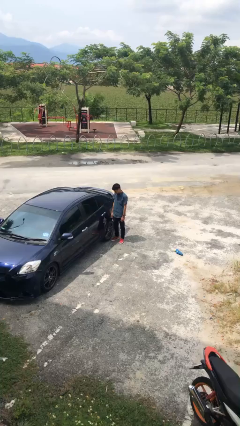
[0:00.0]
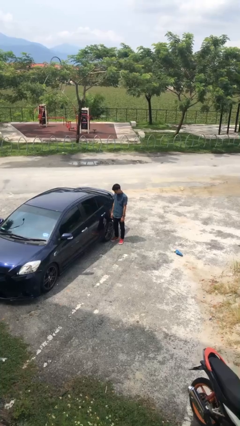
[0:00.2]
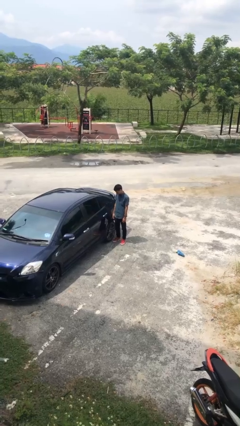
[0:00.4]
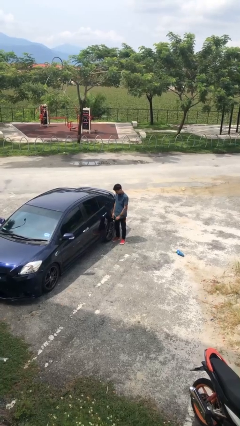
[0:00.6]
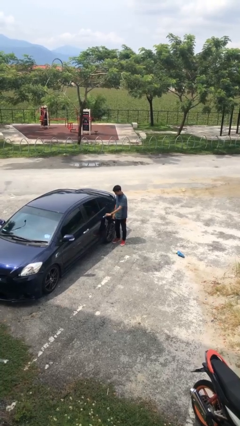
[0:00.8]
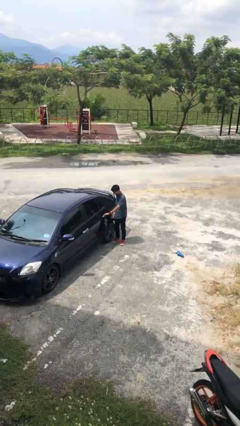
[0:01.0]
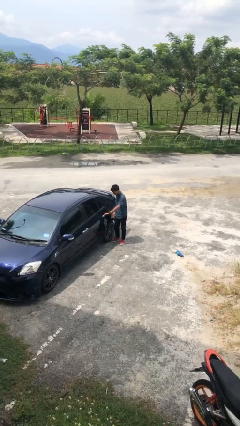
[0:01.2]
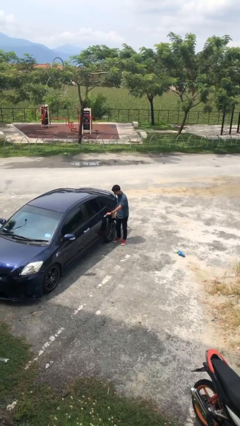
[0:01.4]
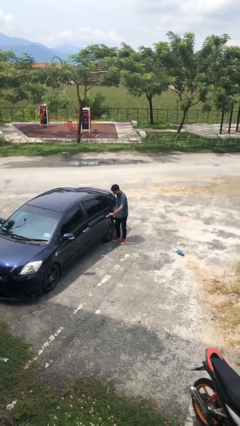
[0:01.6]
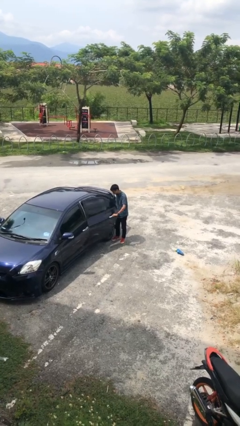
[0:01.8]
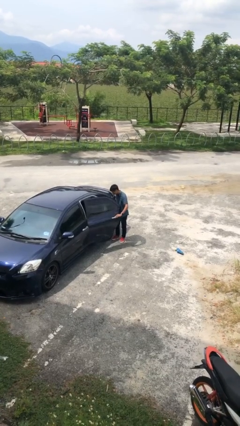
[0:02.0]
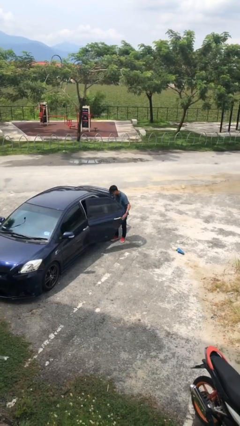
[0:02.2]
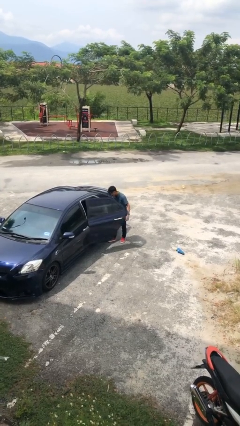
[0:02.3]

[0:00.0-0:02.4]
person opens car door

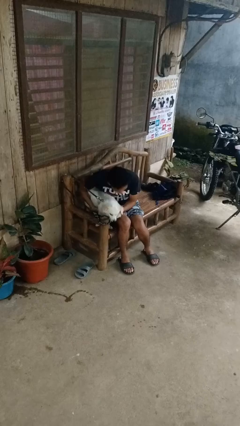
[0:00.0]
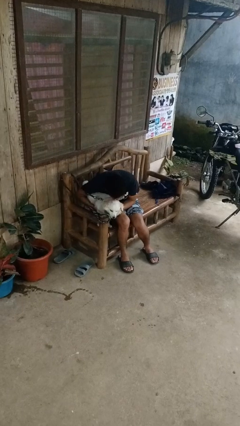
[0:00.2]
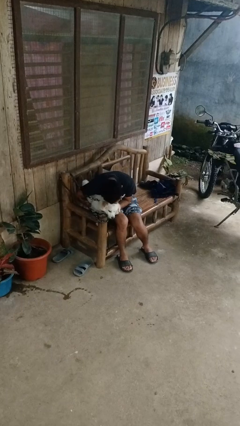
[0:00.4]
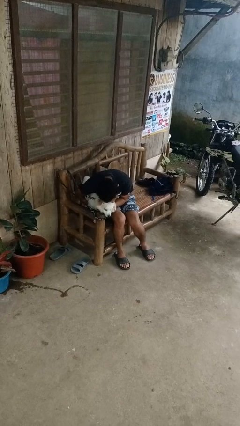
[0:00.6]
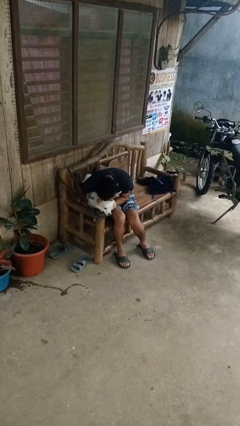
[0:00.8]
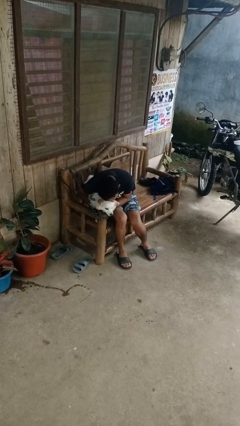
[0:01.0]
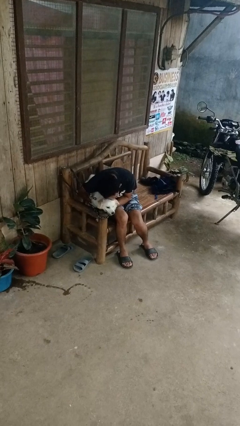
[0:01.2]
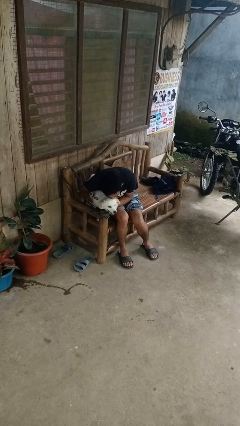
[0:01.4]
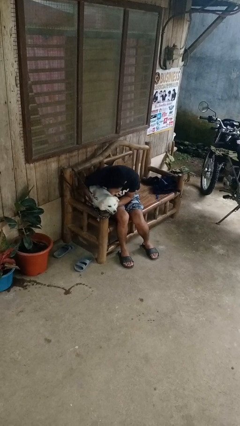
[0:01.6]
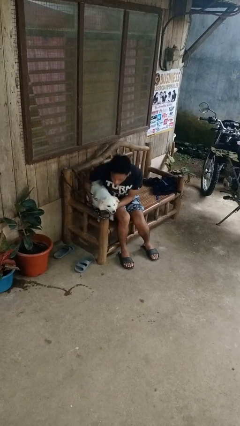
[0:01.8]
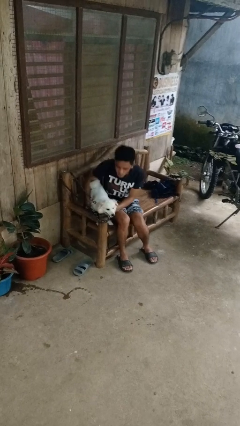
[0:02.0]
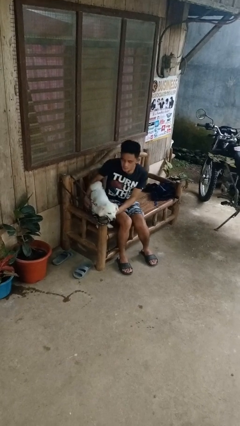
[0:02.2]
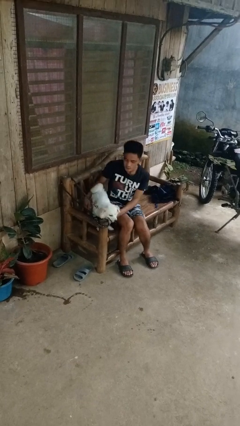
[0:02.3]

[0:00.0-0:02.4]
person hugs dog

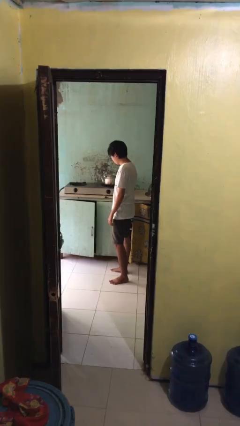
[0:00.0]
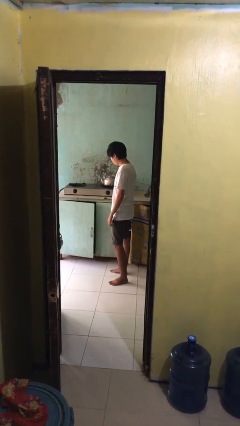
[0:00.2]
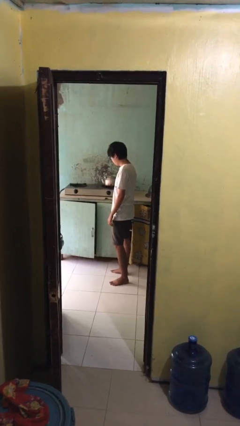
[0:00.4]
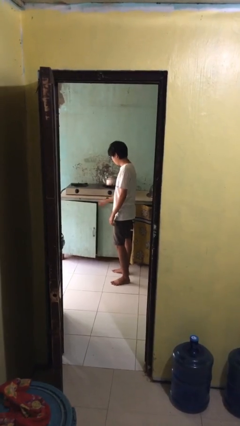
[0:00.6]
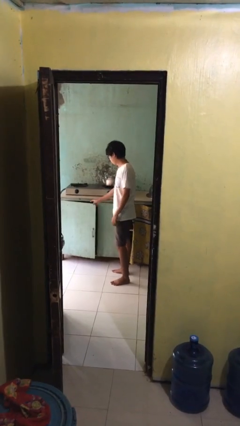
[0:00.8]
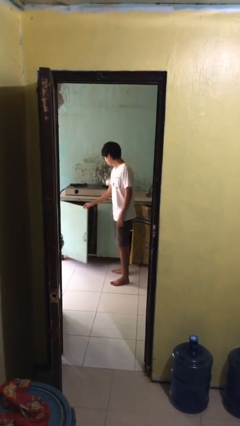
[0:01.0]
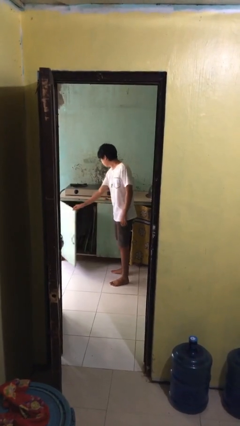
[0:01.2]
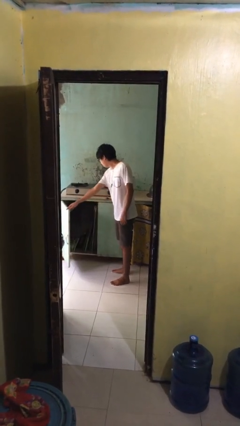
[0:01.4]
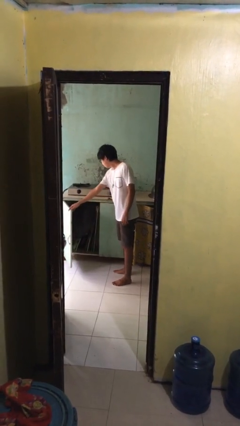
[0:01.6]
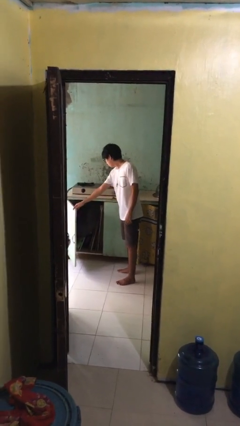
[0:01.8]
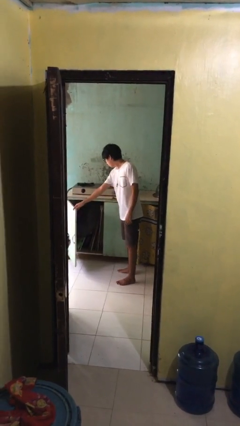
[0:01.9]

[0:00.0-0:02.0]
person opens cabinet

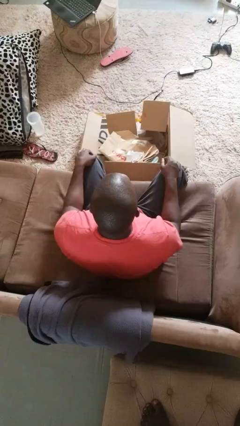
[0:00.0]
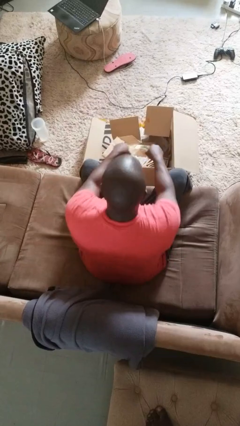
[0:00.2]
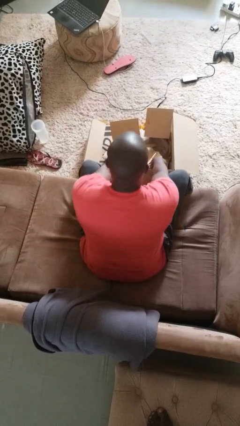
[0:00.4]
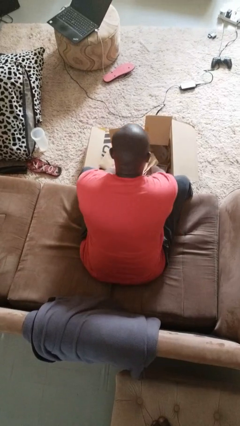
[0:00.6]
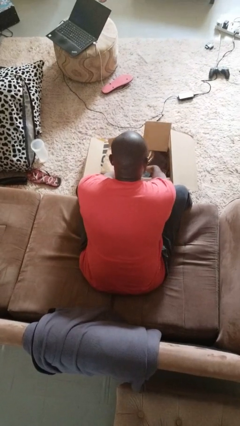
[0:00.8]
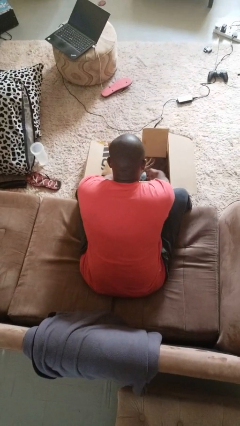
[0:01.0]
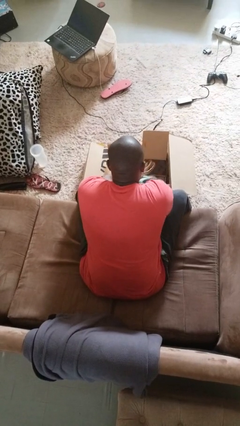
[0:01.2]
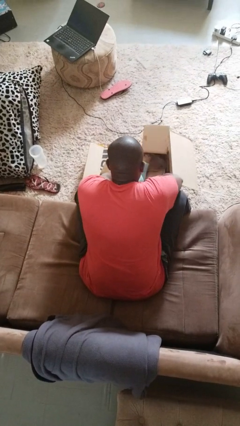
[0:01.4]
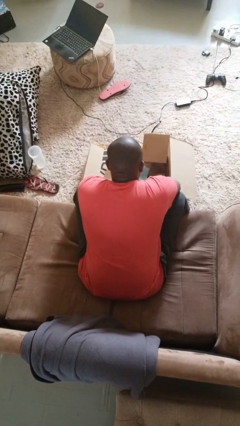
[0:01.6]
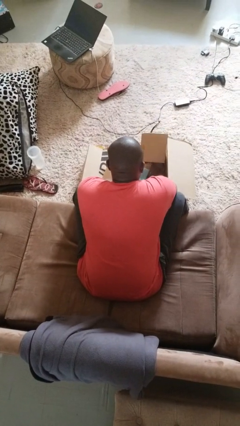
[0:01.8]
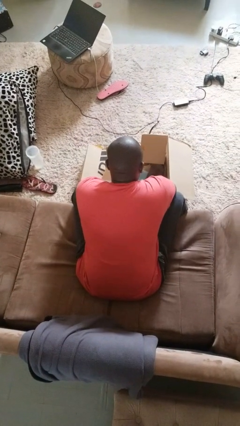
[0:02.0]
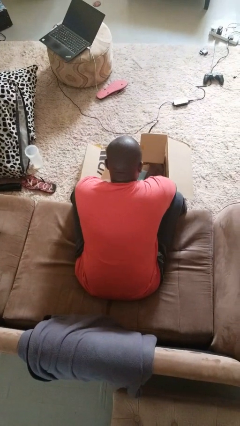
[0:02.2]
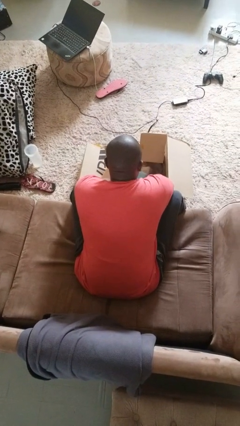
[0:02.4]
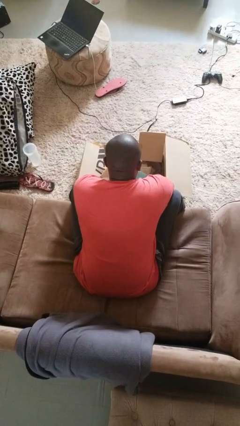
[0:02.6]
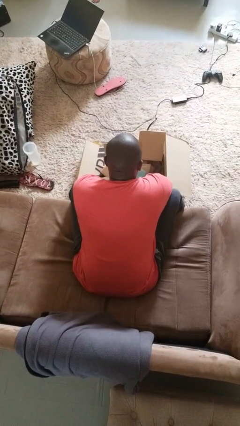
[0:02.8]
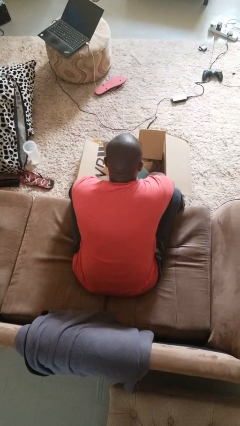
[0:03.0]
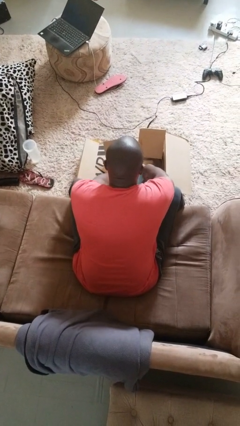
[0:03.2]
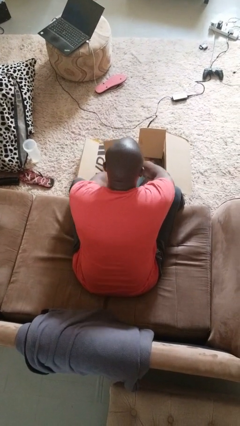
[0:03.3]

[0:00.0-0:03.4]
person searches in box

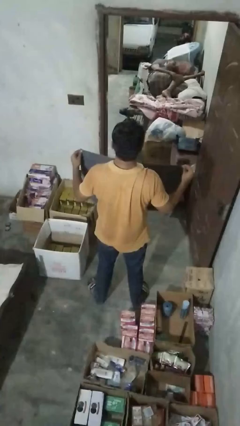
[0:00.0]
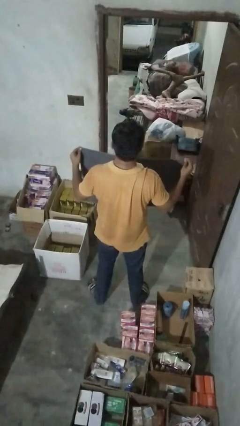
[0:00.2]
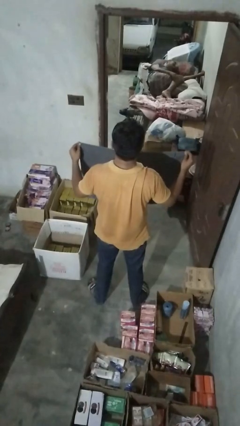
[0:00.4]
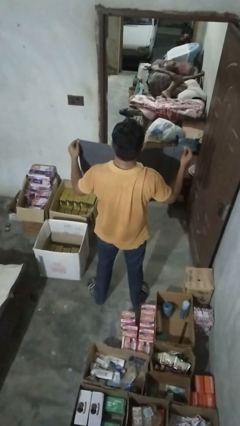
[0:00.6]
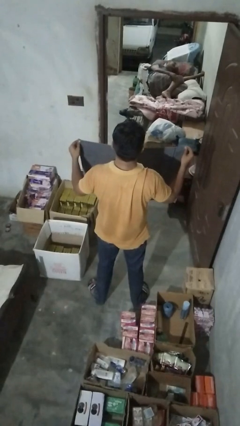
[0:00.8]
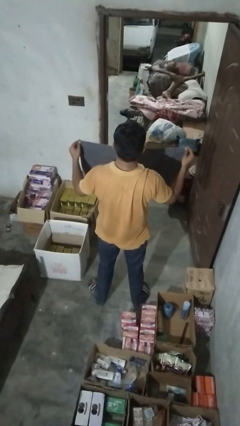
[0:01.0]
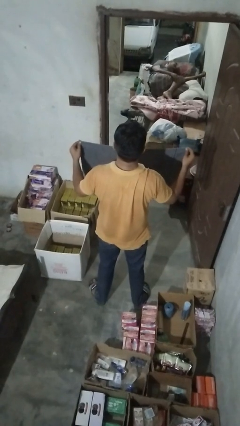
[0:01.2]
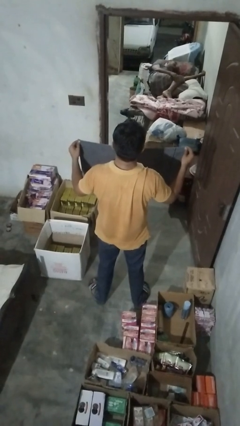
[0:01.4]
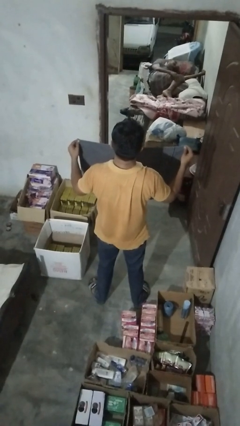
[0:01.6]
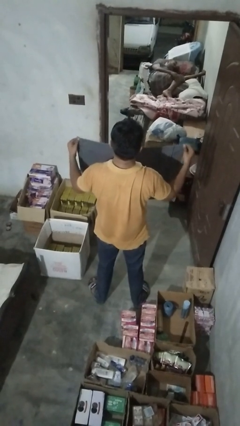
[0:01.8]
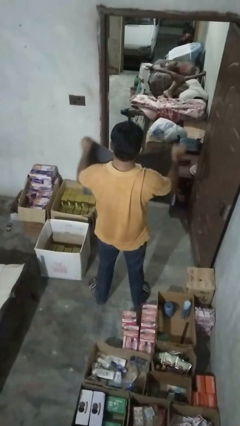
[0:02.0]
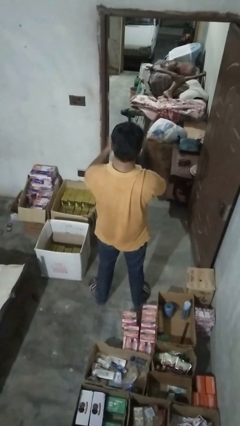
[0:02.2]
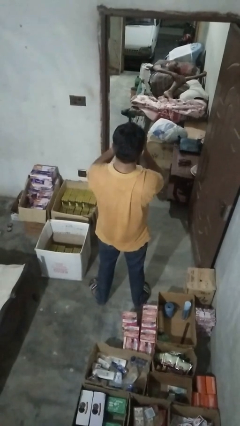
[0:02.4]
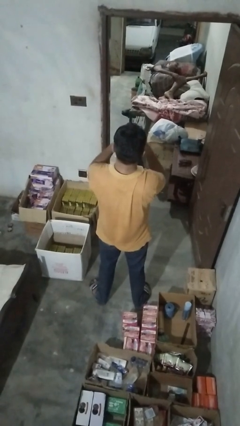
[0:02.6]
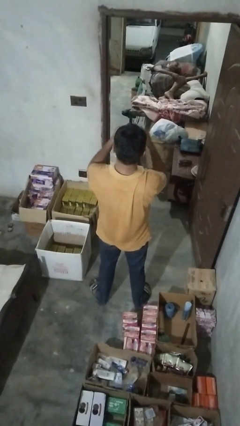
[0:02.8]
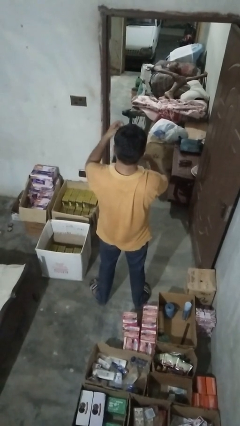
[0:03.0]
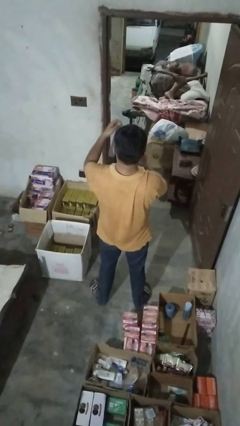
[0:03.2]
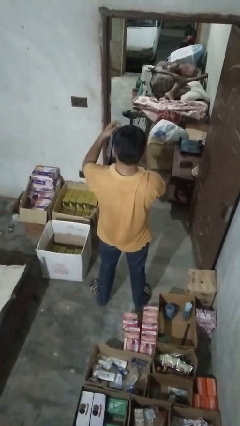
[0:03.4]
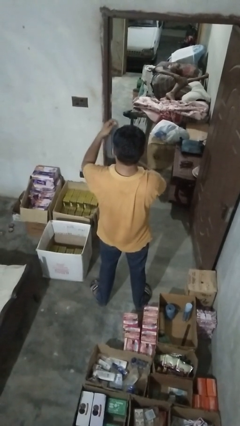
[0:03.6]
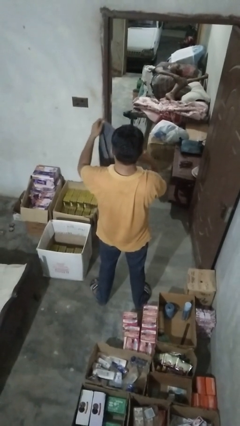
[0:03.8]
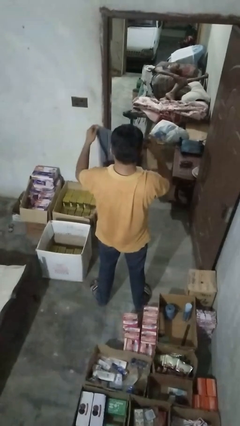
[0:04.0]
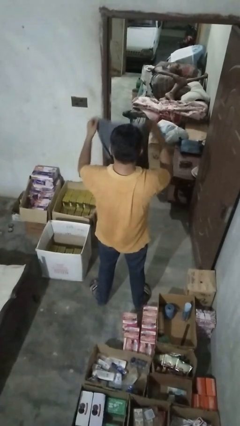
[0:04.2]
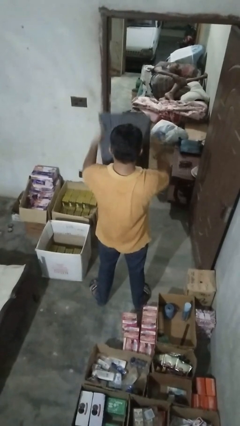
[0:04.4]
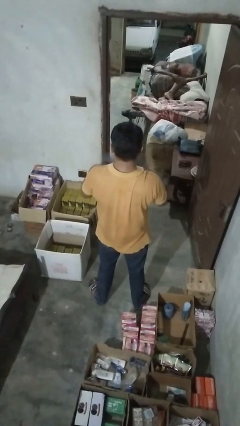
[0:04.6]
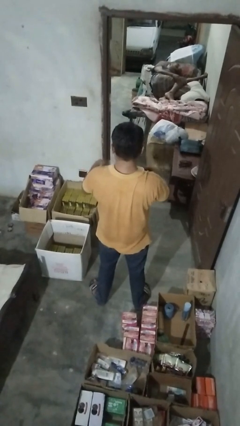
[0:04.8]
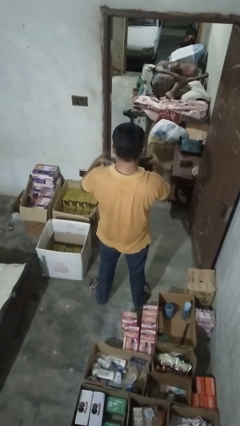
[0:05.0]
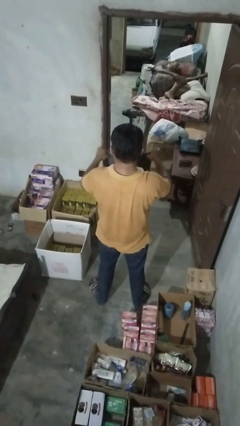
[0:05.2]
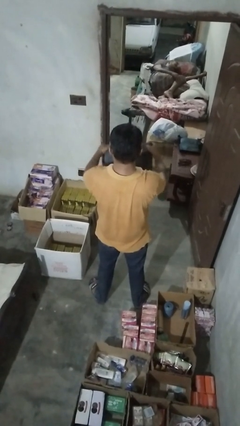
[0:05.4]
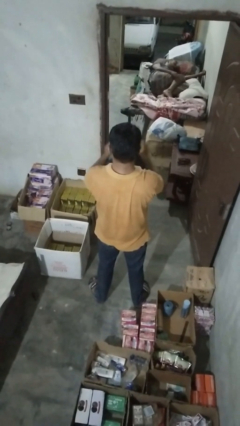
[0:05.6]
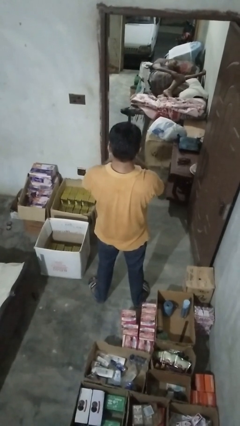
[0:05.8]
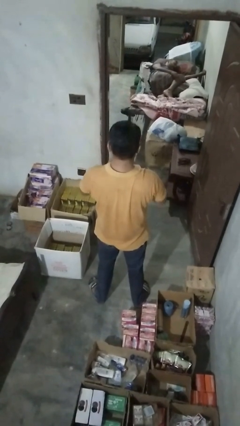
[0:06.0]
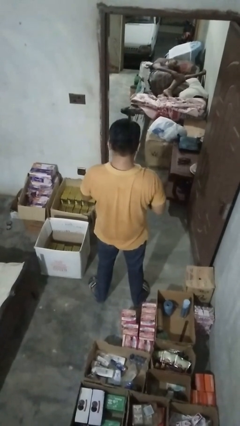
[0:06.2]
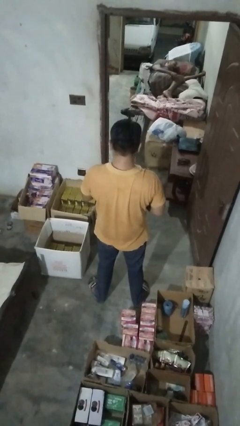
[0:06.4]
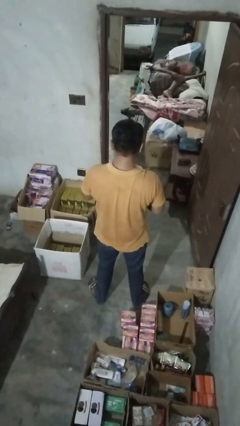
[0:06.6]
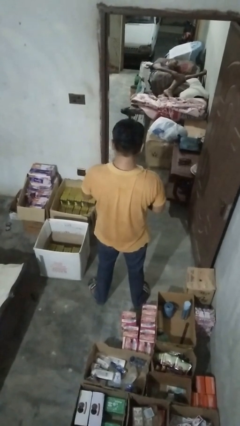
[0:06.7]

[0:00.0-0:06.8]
person folds towel

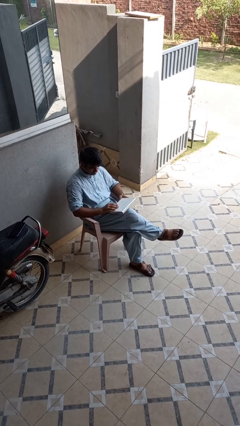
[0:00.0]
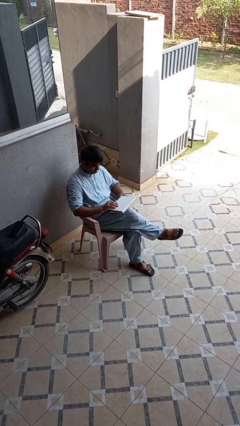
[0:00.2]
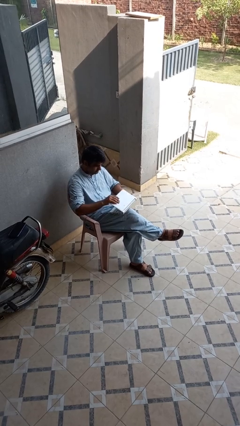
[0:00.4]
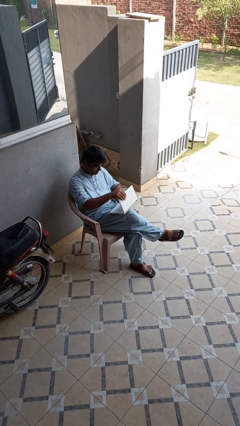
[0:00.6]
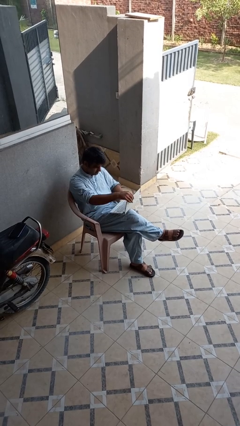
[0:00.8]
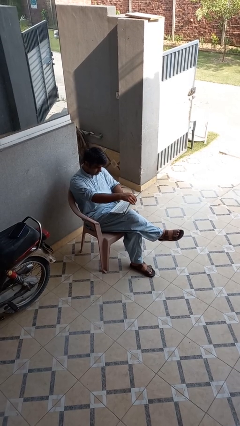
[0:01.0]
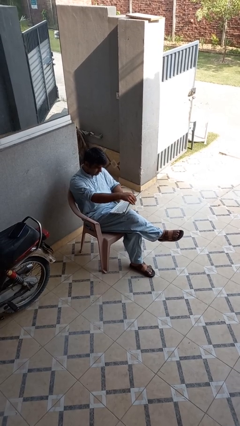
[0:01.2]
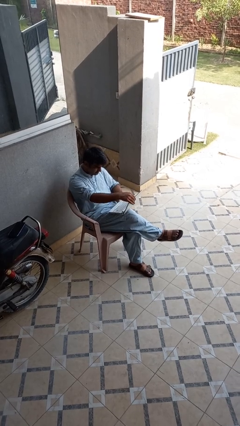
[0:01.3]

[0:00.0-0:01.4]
person opens laptop
